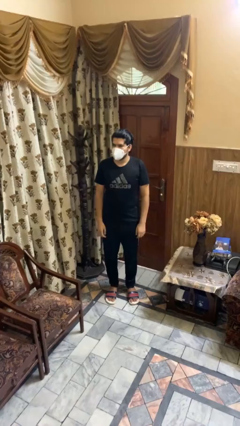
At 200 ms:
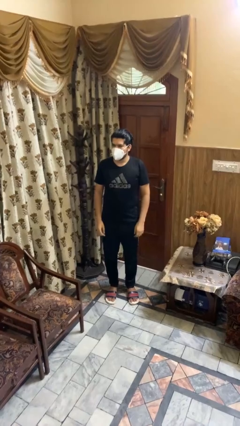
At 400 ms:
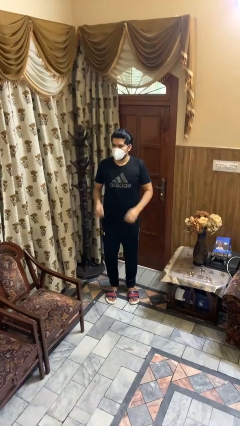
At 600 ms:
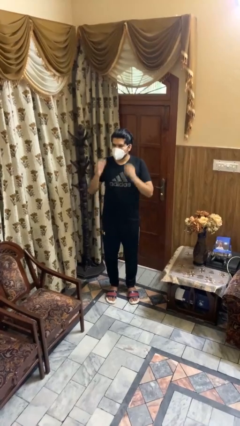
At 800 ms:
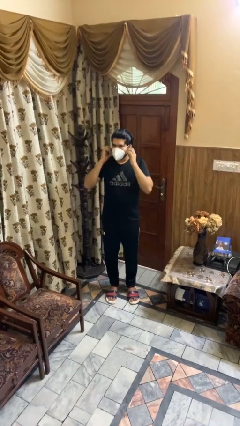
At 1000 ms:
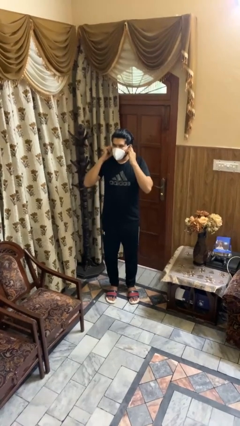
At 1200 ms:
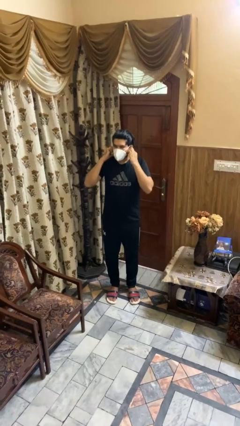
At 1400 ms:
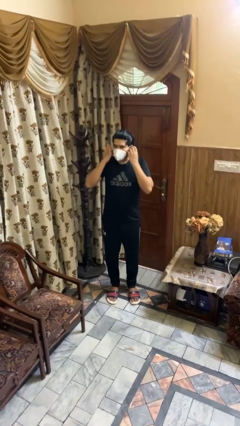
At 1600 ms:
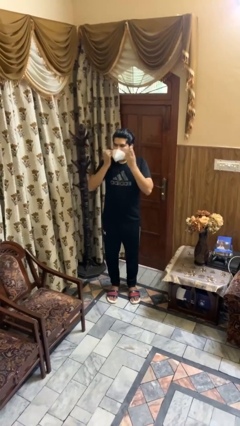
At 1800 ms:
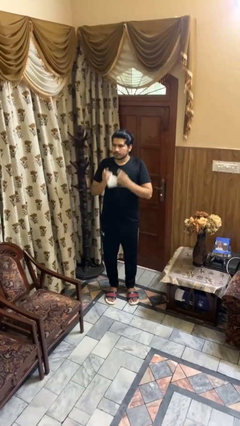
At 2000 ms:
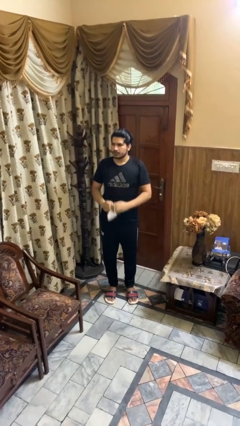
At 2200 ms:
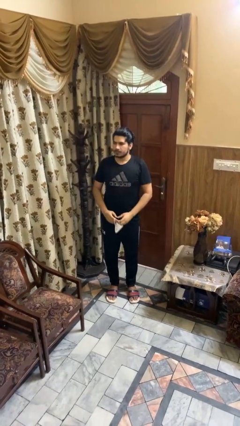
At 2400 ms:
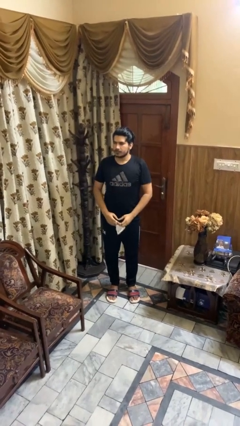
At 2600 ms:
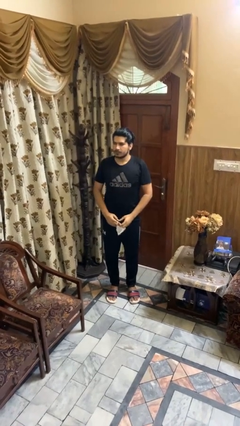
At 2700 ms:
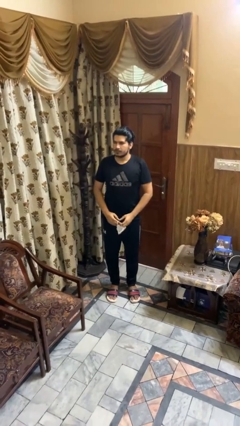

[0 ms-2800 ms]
person takes off facemask

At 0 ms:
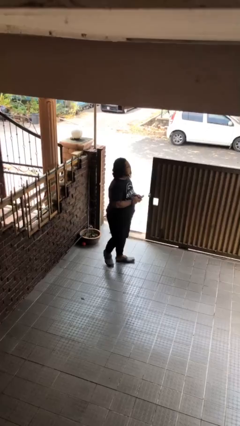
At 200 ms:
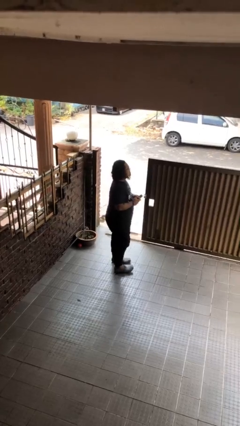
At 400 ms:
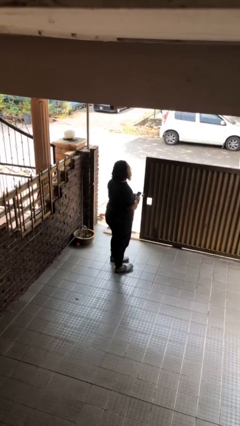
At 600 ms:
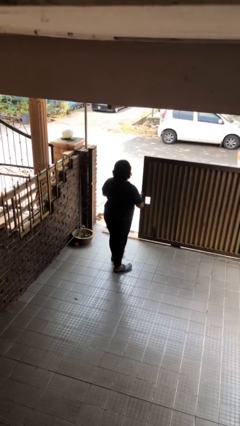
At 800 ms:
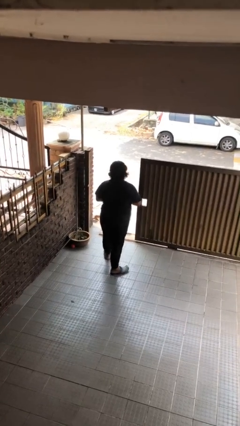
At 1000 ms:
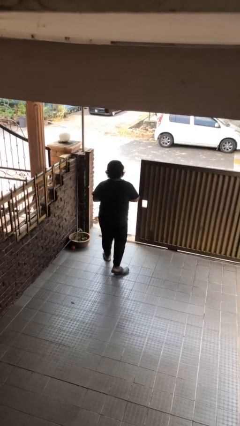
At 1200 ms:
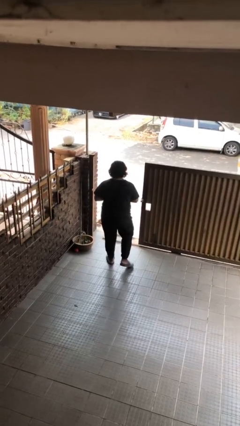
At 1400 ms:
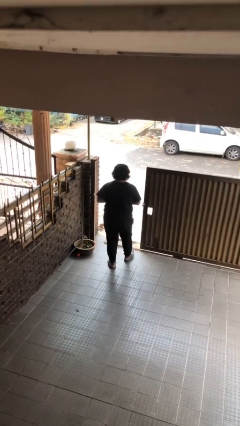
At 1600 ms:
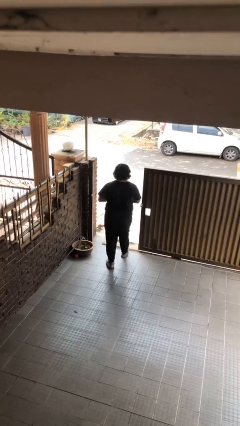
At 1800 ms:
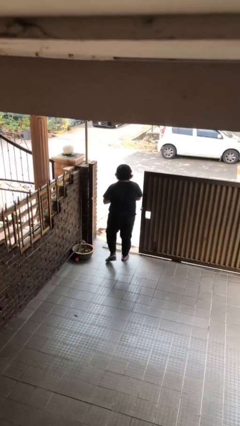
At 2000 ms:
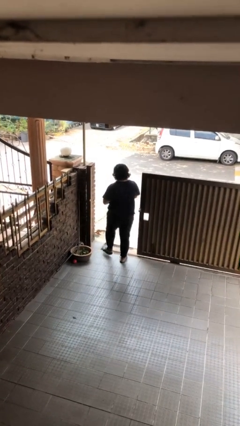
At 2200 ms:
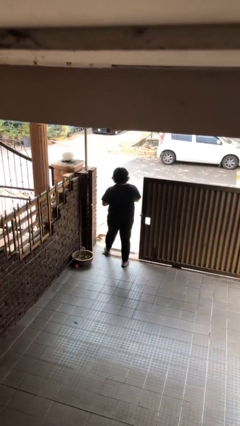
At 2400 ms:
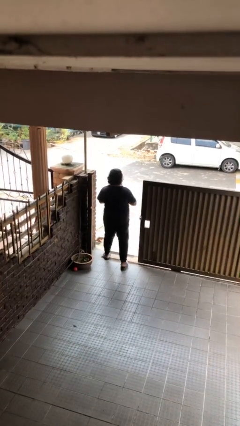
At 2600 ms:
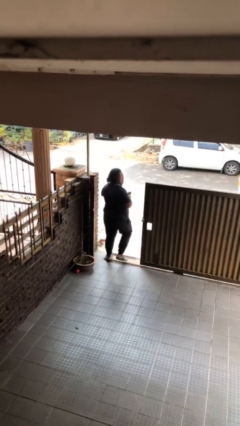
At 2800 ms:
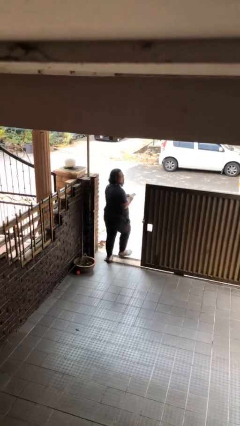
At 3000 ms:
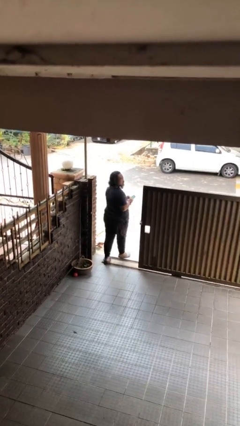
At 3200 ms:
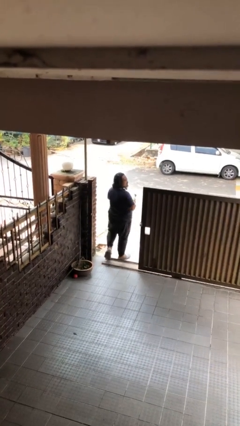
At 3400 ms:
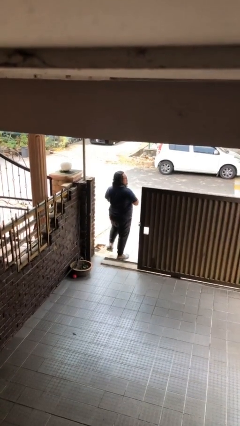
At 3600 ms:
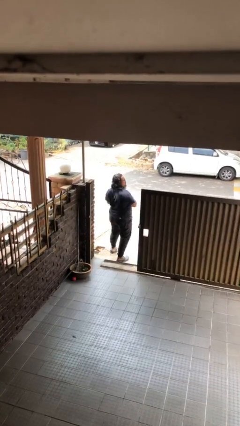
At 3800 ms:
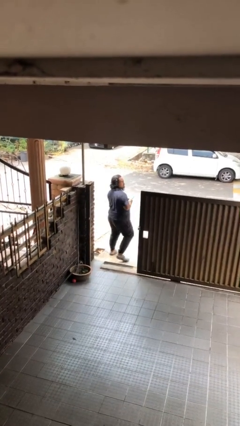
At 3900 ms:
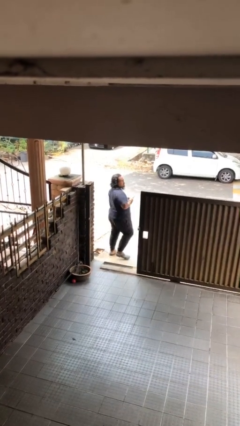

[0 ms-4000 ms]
person exits scene through structure

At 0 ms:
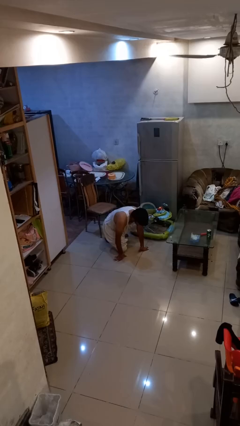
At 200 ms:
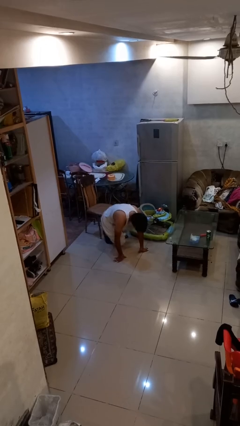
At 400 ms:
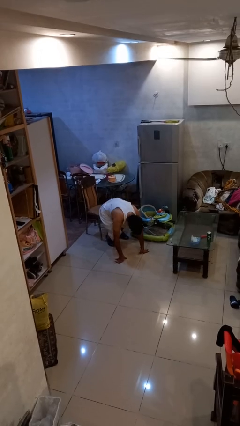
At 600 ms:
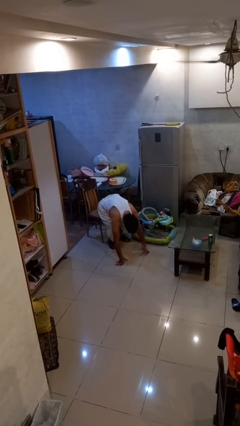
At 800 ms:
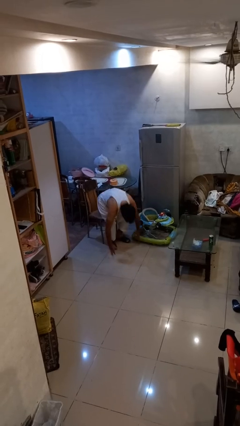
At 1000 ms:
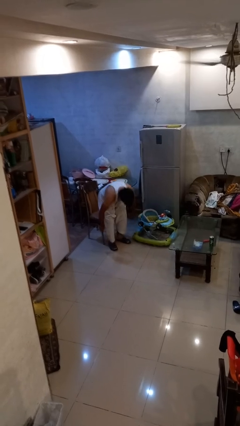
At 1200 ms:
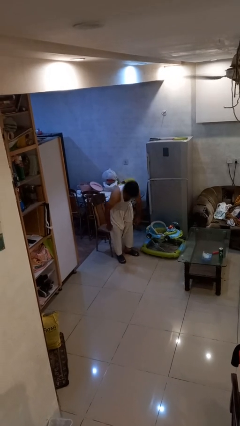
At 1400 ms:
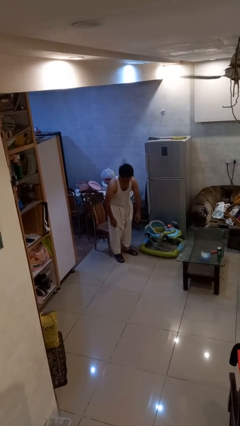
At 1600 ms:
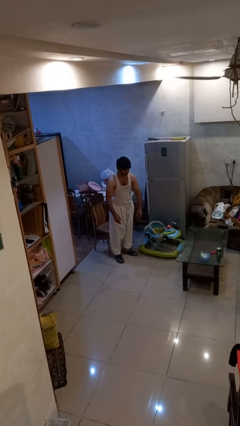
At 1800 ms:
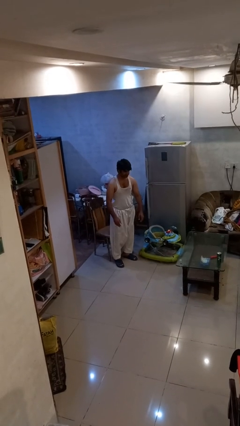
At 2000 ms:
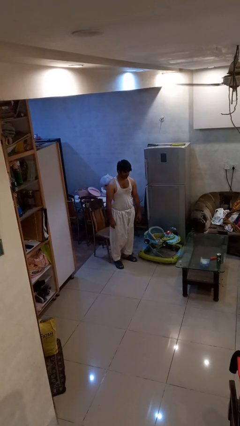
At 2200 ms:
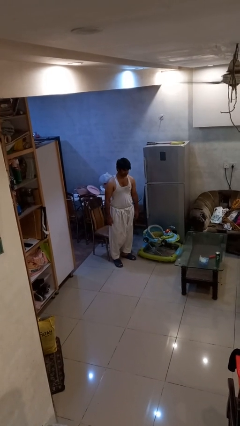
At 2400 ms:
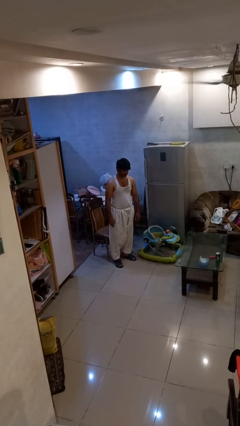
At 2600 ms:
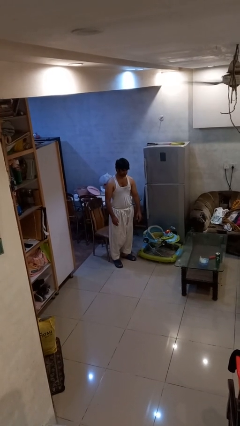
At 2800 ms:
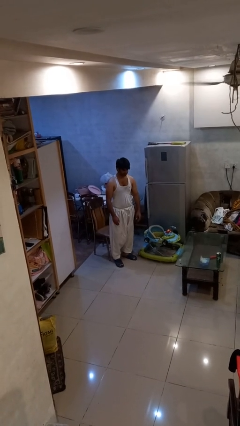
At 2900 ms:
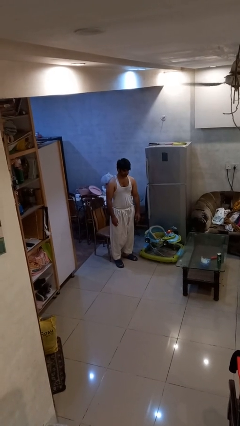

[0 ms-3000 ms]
person stands up from floor

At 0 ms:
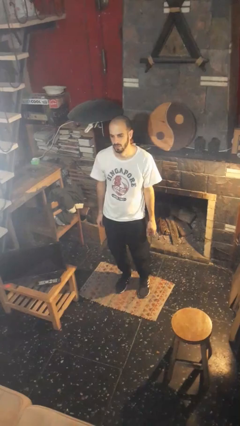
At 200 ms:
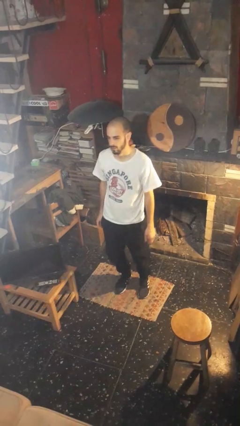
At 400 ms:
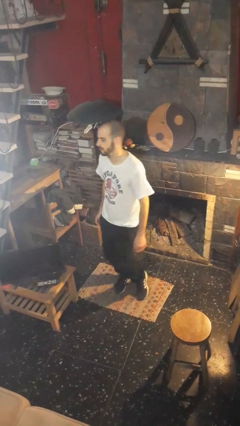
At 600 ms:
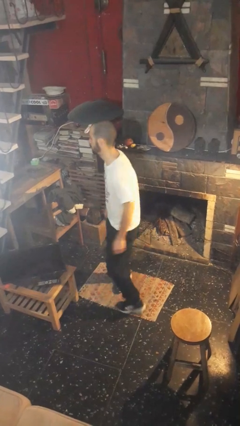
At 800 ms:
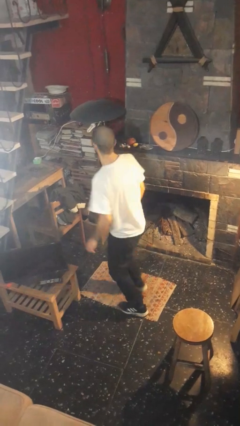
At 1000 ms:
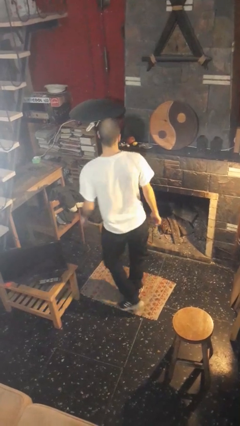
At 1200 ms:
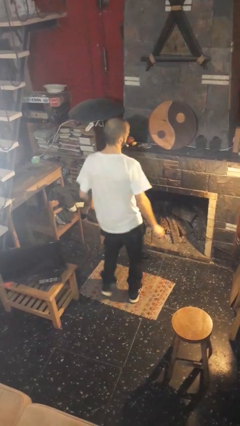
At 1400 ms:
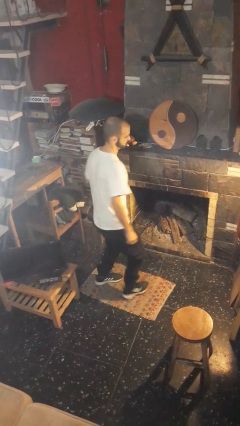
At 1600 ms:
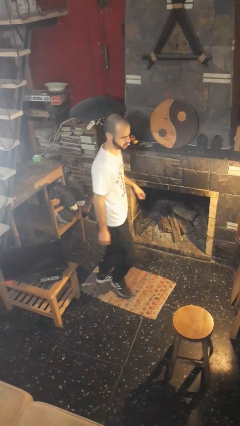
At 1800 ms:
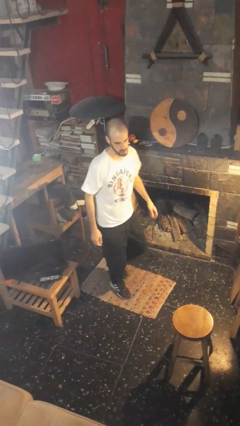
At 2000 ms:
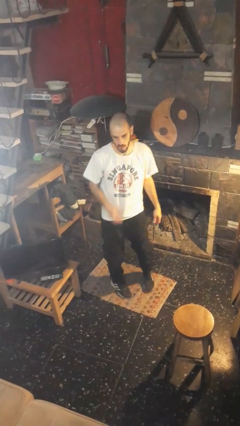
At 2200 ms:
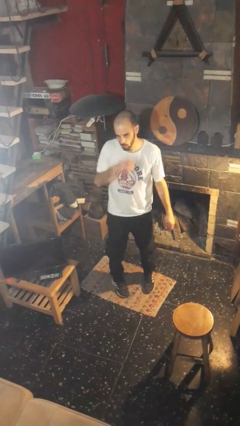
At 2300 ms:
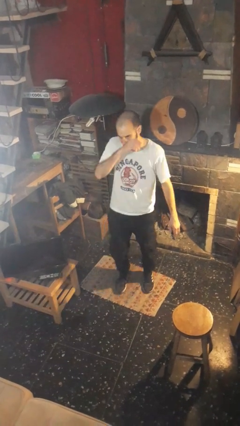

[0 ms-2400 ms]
person twirls

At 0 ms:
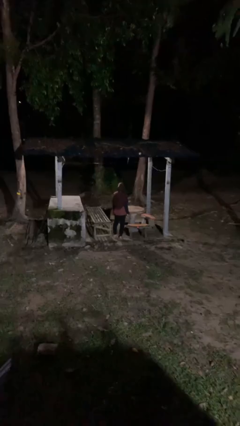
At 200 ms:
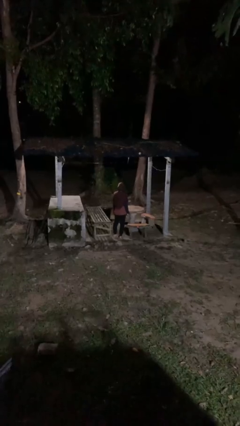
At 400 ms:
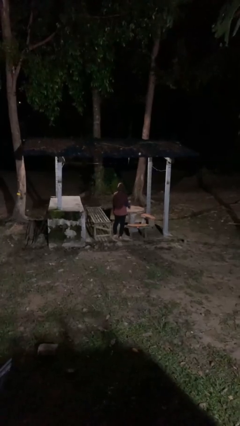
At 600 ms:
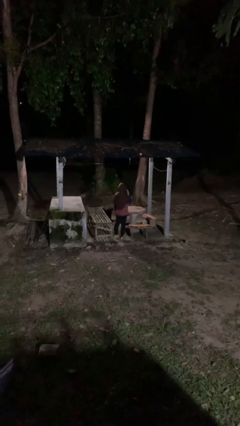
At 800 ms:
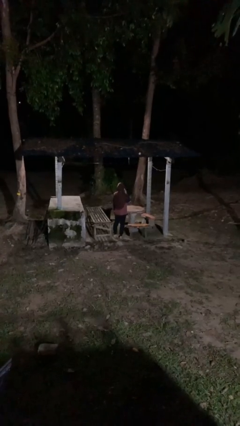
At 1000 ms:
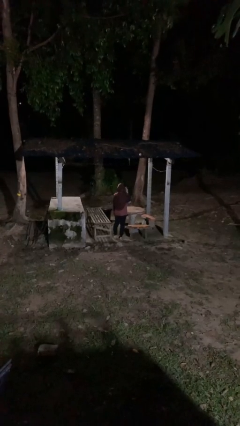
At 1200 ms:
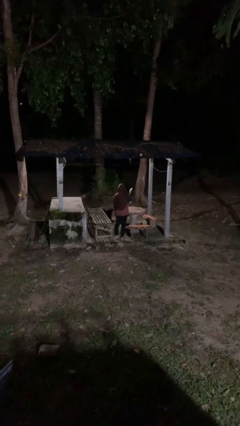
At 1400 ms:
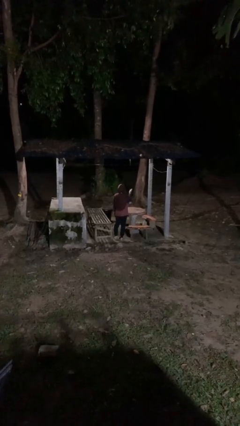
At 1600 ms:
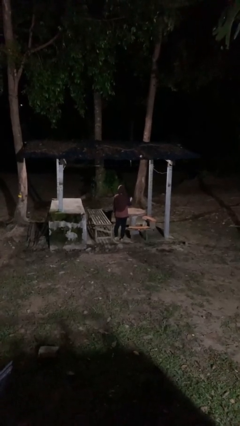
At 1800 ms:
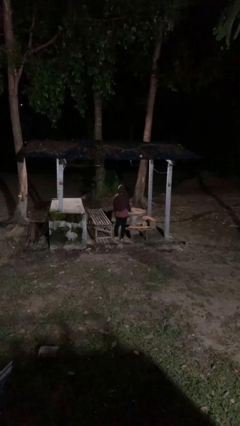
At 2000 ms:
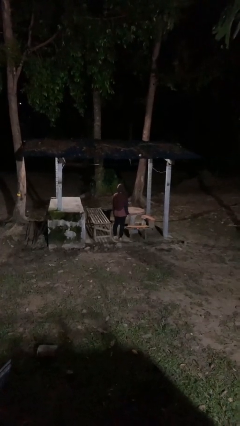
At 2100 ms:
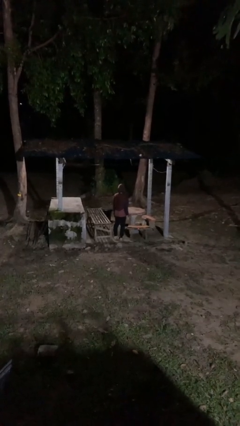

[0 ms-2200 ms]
person gestures blow kiss

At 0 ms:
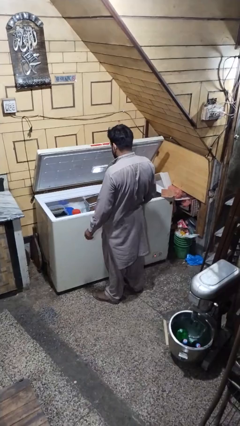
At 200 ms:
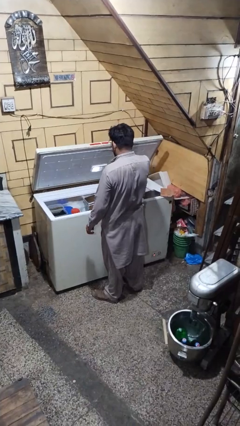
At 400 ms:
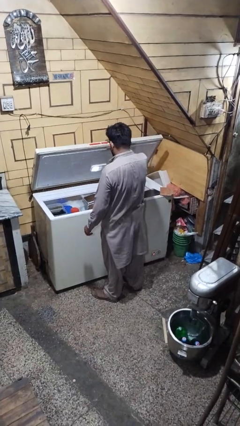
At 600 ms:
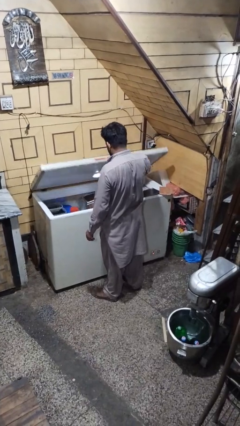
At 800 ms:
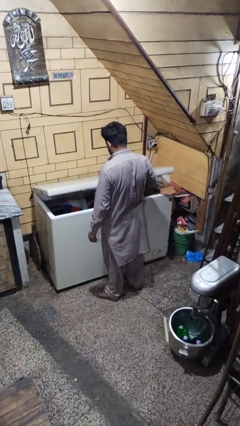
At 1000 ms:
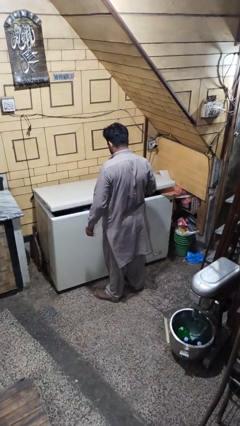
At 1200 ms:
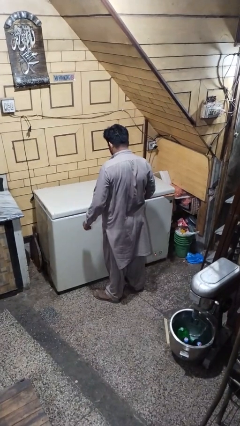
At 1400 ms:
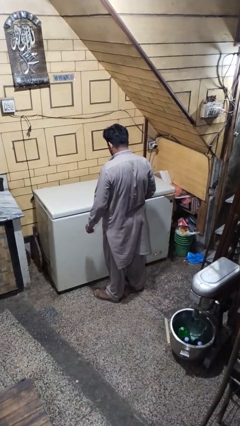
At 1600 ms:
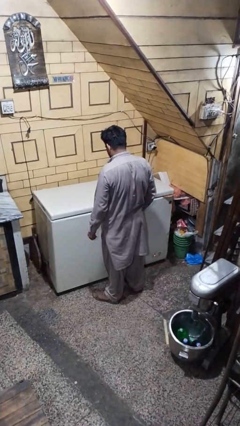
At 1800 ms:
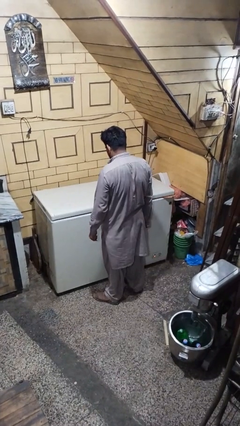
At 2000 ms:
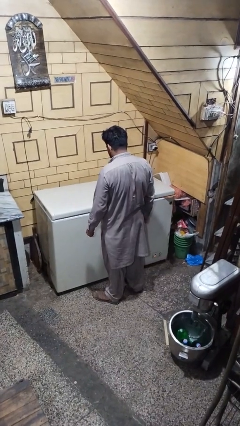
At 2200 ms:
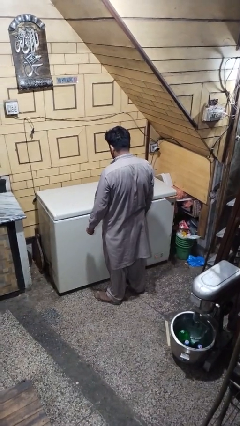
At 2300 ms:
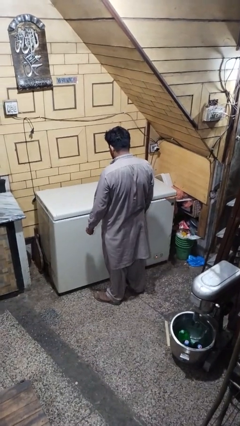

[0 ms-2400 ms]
person closes refrigerator

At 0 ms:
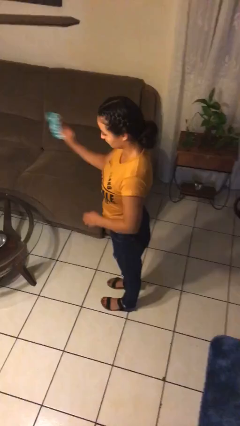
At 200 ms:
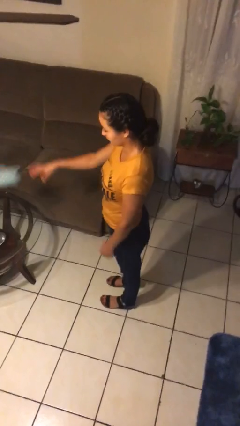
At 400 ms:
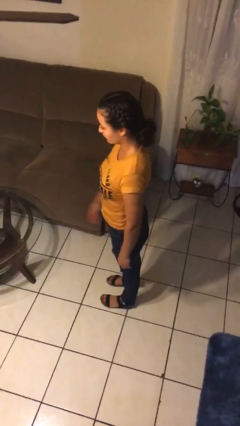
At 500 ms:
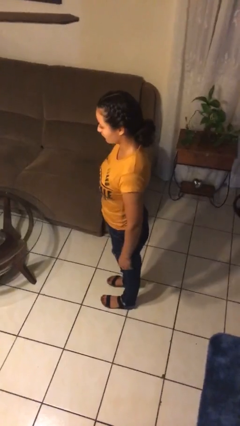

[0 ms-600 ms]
person throws object on table
